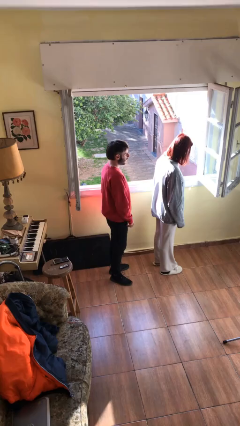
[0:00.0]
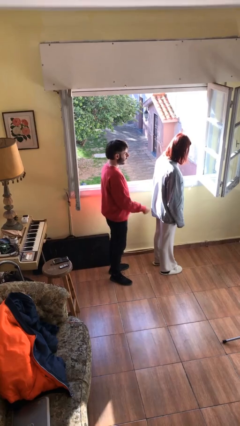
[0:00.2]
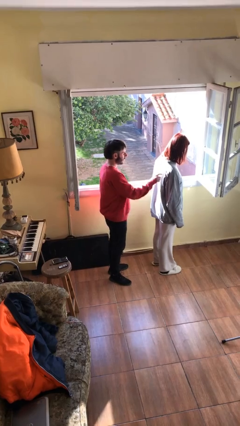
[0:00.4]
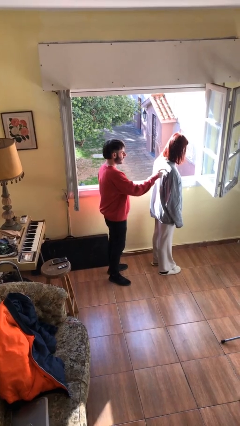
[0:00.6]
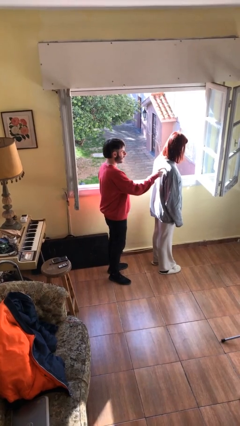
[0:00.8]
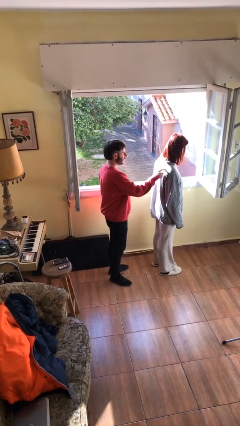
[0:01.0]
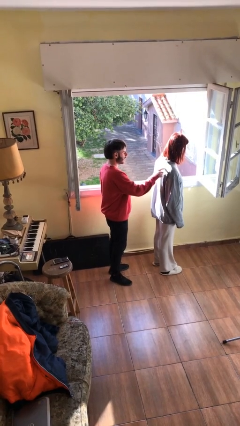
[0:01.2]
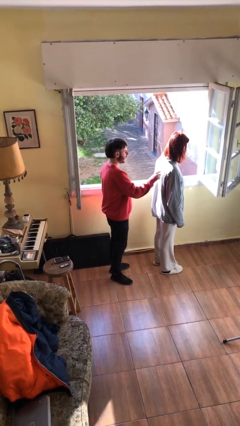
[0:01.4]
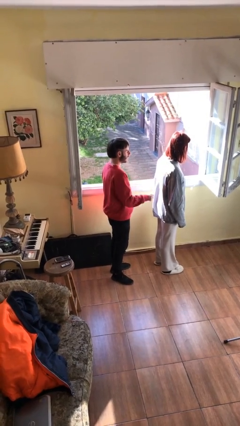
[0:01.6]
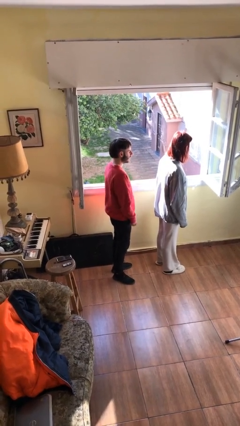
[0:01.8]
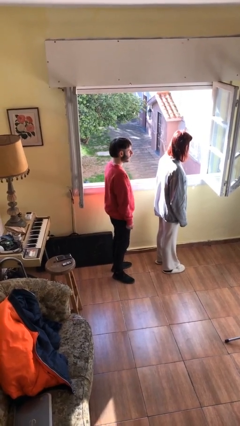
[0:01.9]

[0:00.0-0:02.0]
person touches back of person

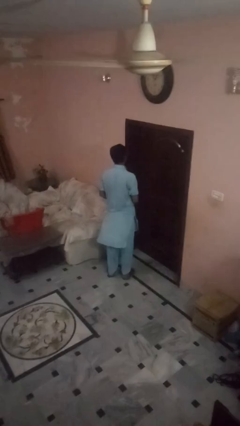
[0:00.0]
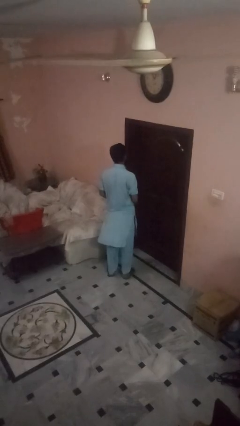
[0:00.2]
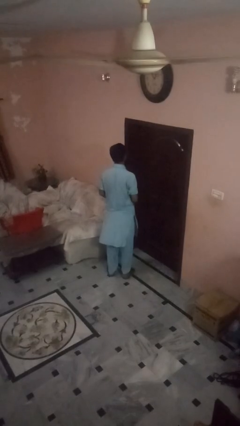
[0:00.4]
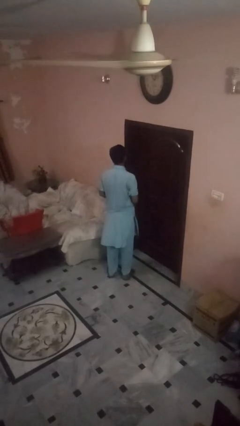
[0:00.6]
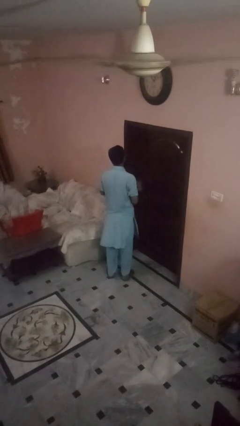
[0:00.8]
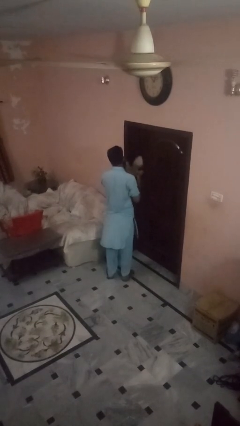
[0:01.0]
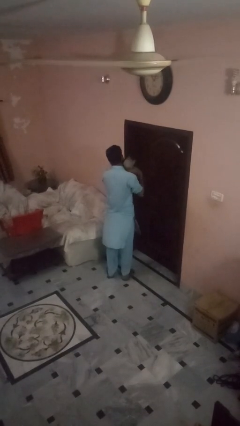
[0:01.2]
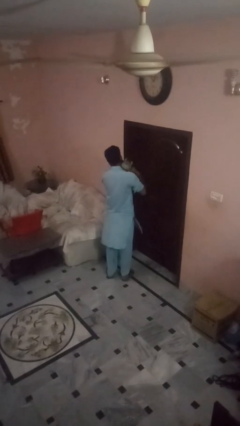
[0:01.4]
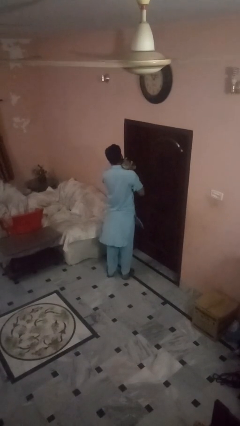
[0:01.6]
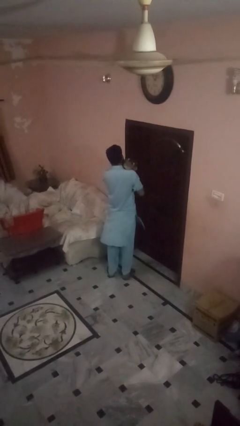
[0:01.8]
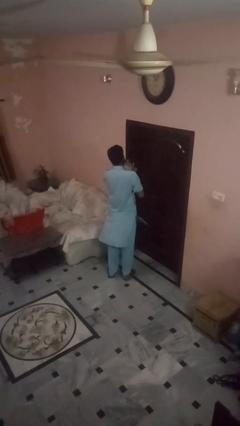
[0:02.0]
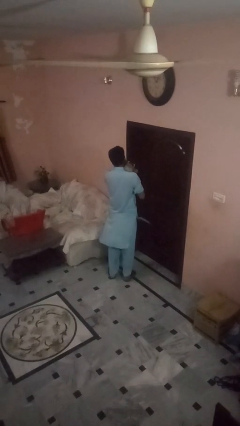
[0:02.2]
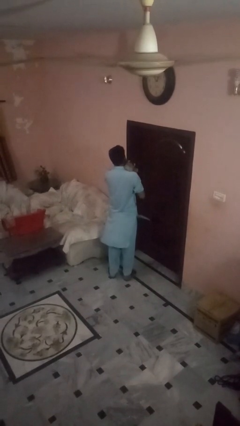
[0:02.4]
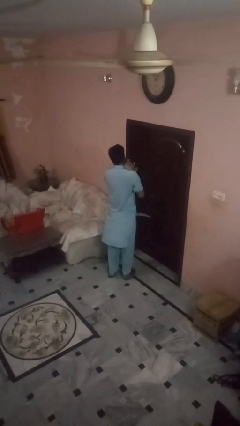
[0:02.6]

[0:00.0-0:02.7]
person hugs stuffed animal

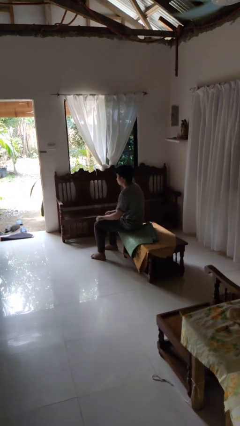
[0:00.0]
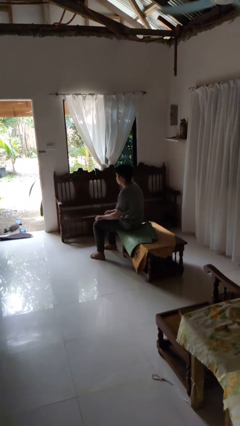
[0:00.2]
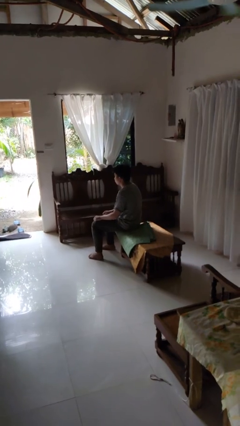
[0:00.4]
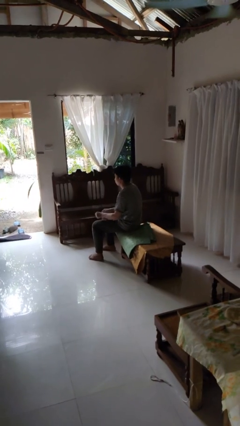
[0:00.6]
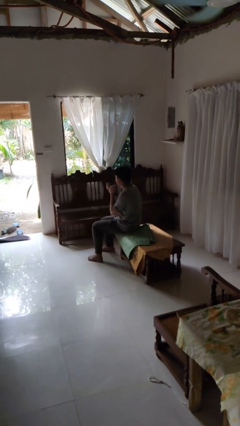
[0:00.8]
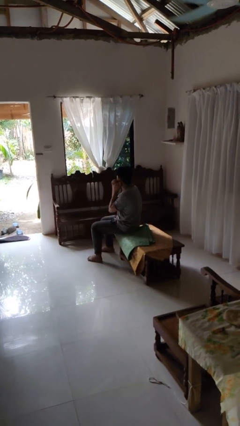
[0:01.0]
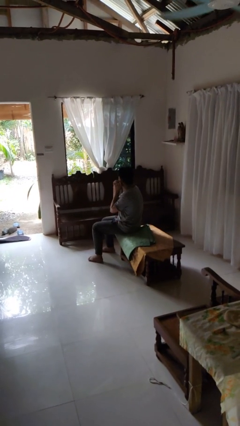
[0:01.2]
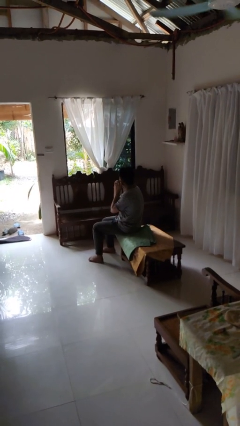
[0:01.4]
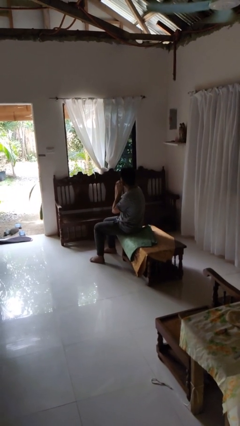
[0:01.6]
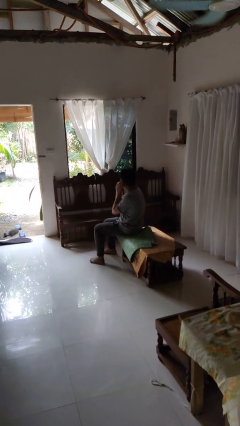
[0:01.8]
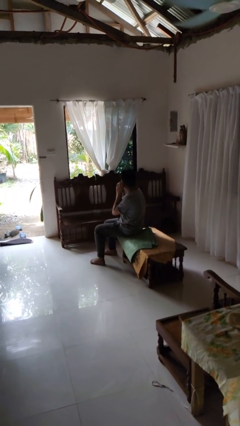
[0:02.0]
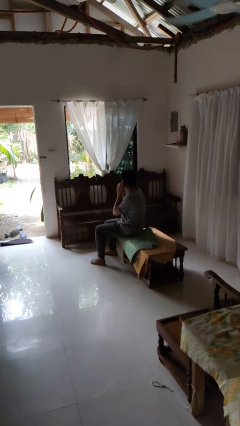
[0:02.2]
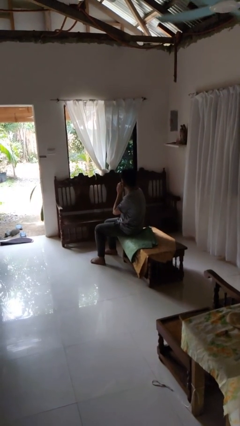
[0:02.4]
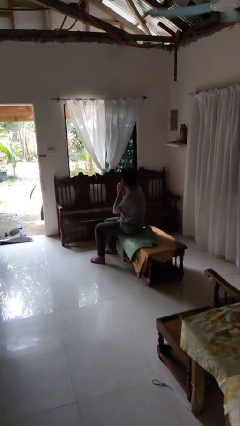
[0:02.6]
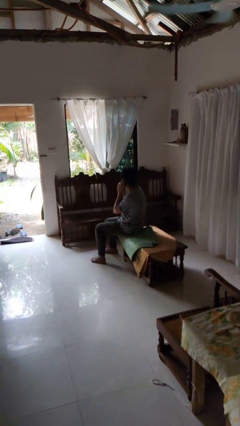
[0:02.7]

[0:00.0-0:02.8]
person puts on earrings

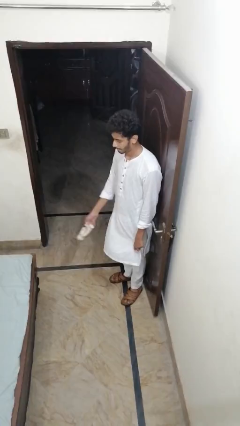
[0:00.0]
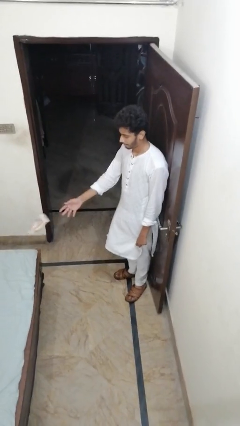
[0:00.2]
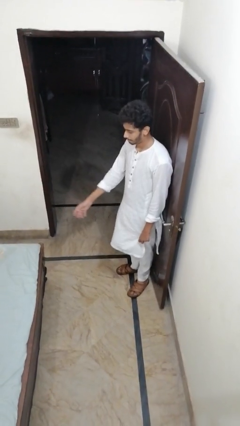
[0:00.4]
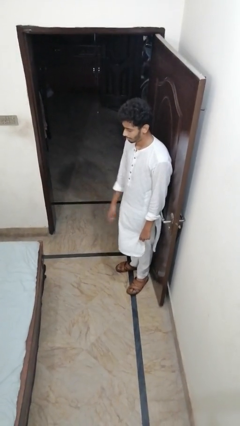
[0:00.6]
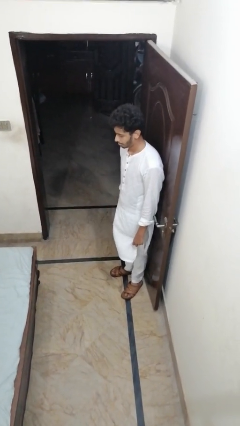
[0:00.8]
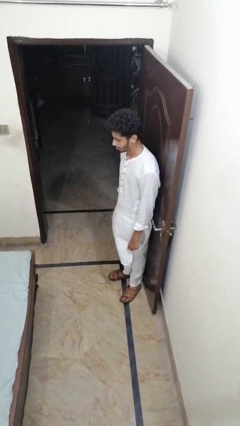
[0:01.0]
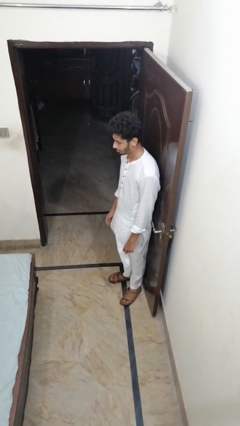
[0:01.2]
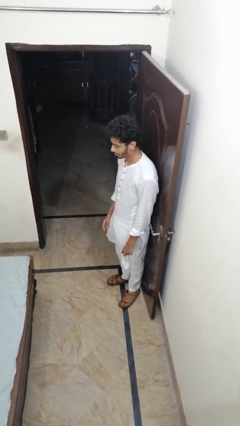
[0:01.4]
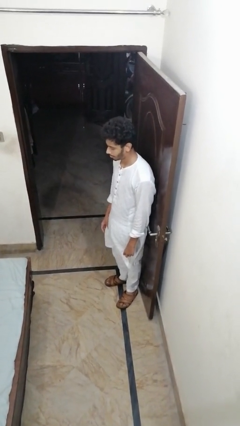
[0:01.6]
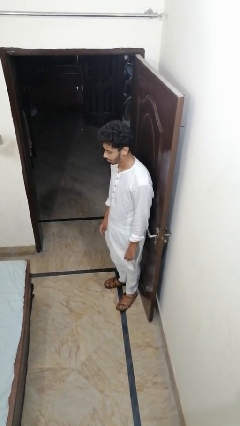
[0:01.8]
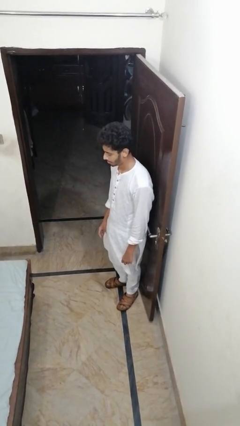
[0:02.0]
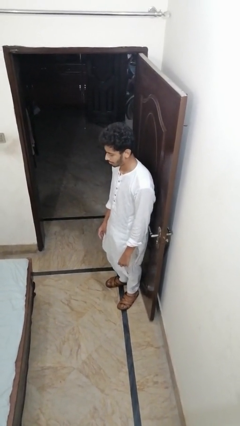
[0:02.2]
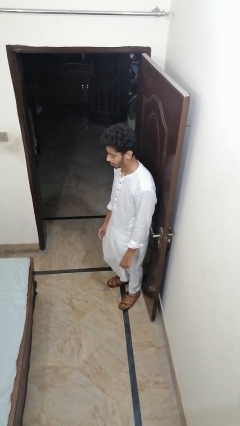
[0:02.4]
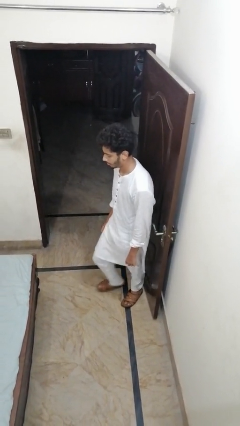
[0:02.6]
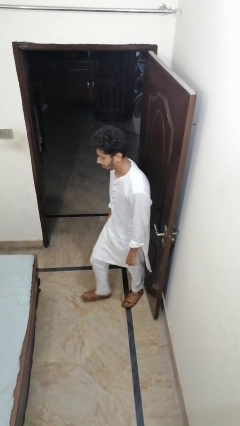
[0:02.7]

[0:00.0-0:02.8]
person throws object on bed

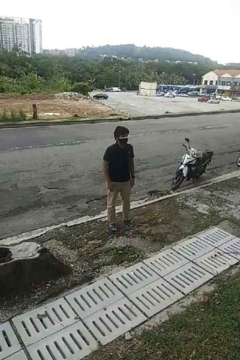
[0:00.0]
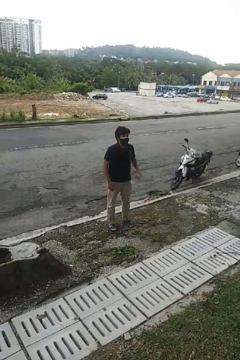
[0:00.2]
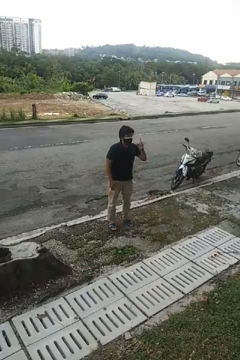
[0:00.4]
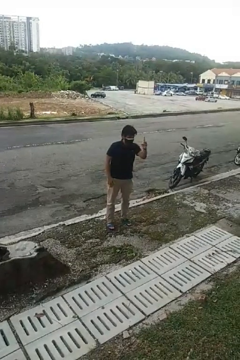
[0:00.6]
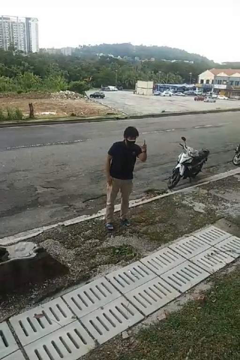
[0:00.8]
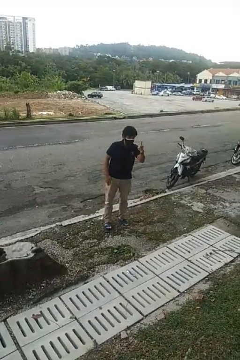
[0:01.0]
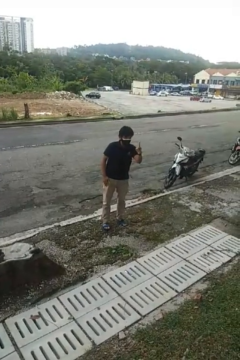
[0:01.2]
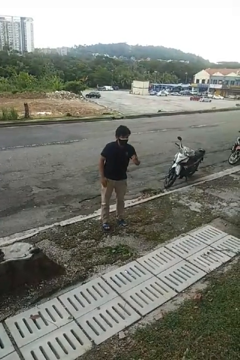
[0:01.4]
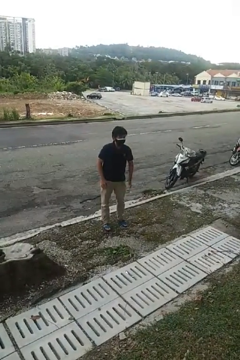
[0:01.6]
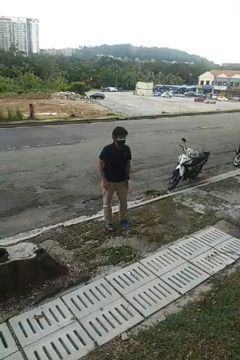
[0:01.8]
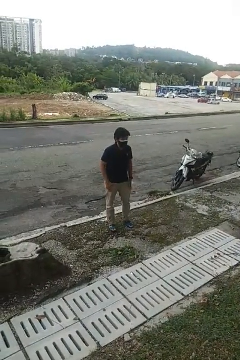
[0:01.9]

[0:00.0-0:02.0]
person gestures number one

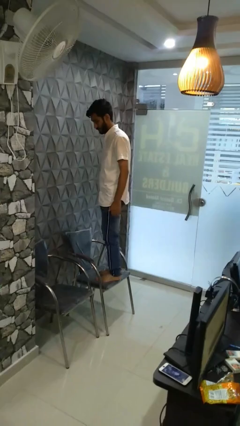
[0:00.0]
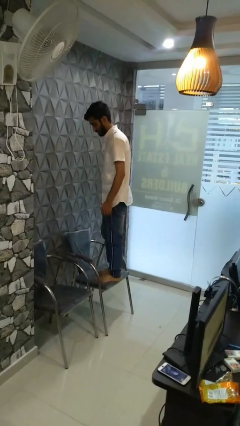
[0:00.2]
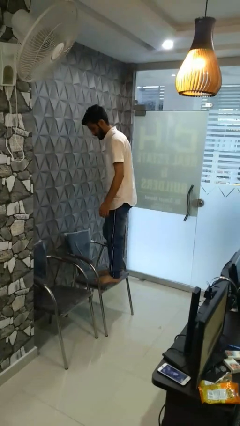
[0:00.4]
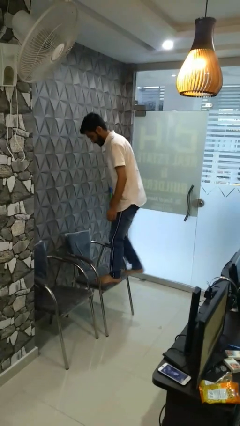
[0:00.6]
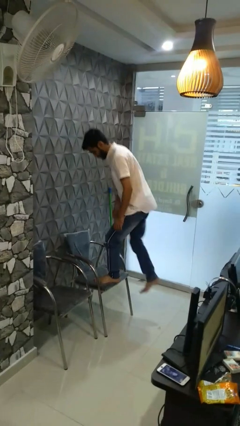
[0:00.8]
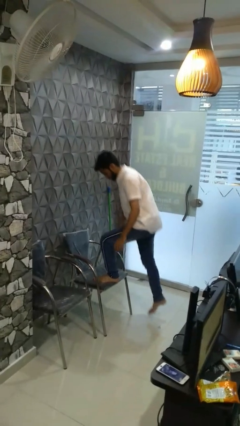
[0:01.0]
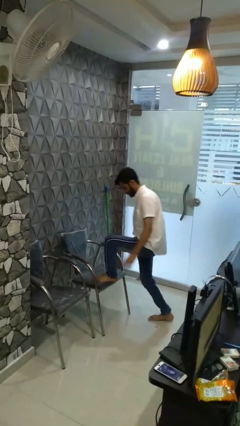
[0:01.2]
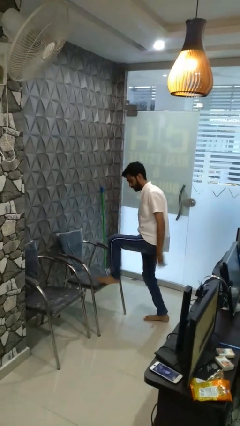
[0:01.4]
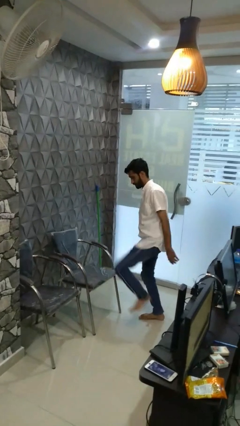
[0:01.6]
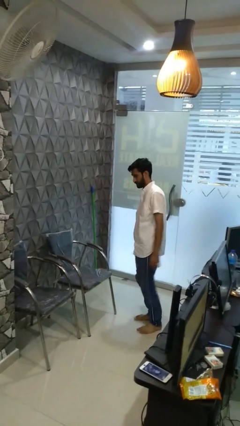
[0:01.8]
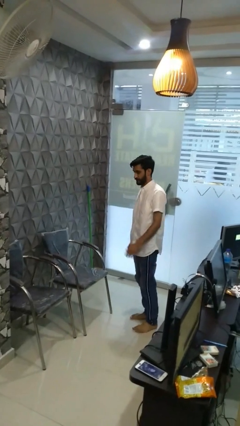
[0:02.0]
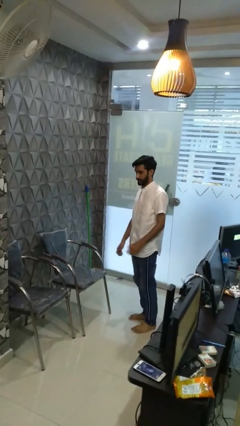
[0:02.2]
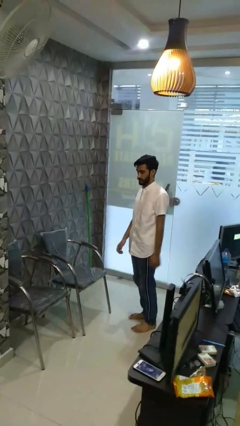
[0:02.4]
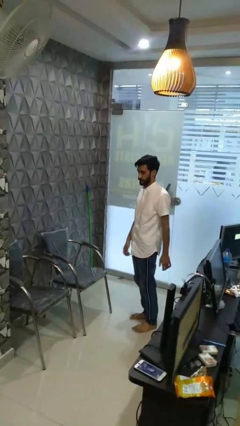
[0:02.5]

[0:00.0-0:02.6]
person climbs off chair

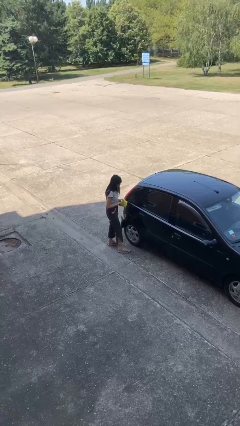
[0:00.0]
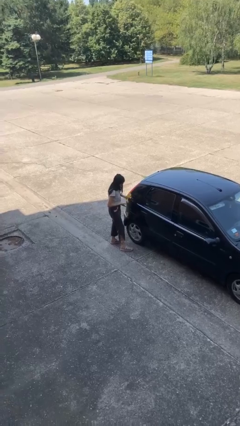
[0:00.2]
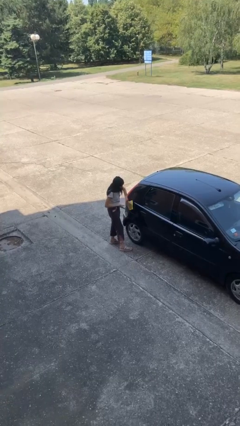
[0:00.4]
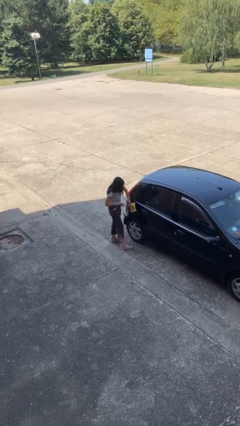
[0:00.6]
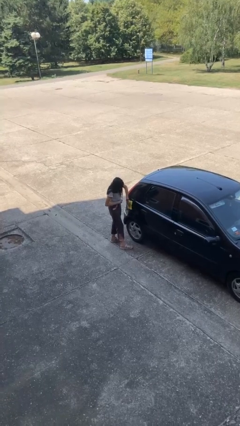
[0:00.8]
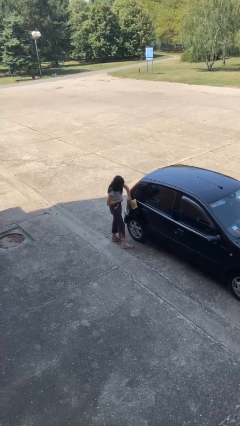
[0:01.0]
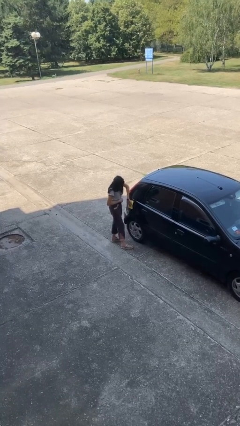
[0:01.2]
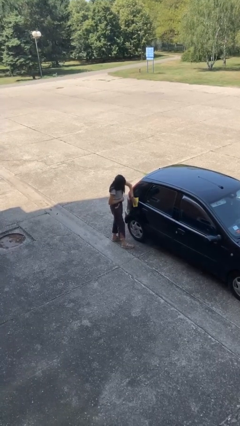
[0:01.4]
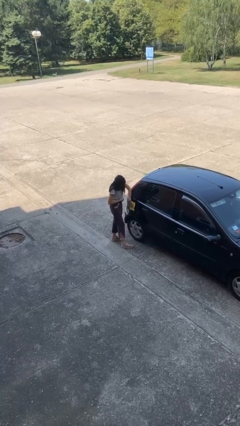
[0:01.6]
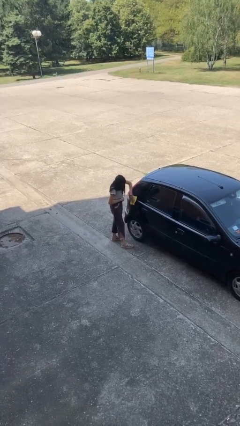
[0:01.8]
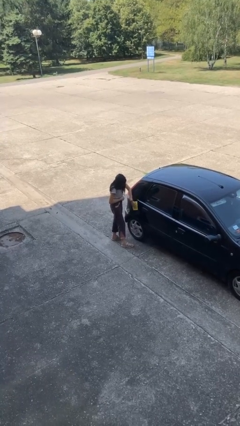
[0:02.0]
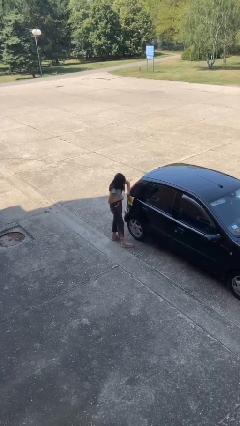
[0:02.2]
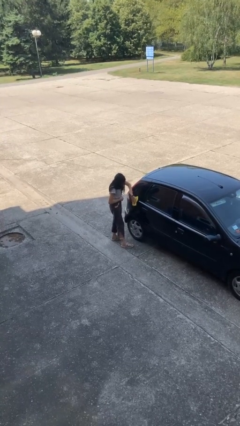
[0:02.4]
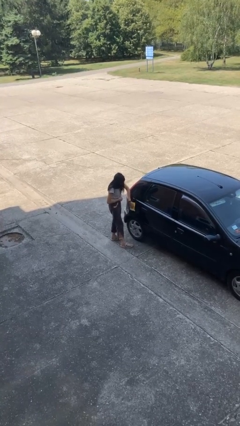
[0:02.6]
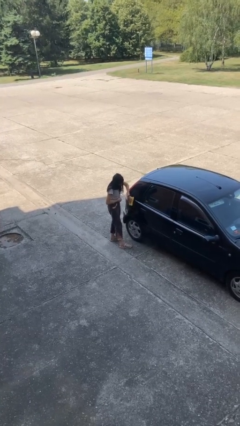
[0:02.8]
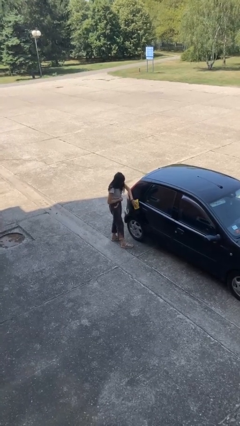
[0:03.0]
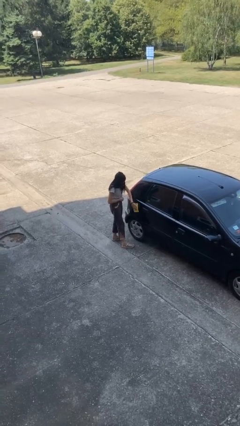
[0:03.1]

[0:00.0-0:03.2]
person polishes car with rag
